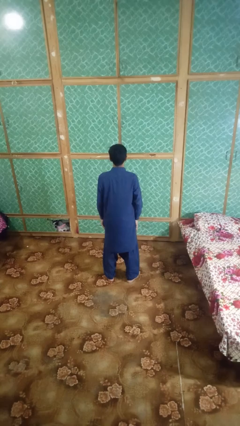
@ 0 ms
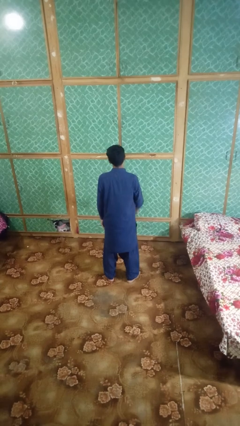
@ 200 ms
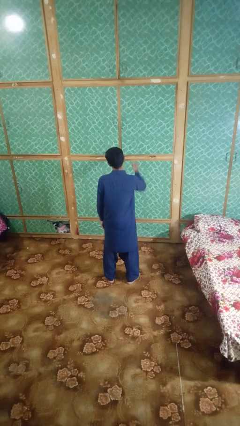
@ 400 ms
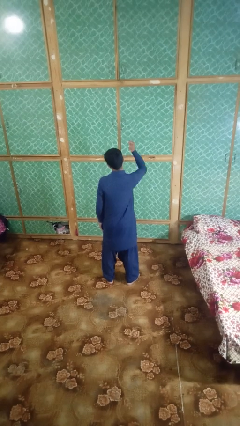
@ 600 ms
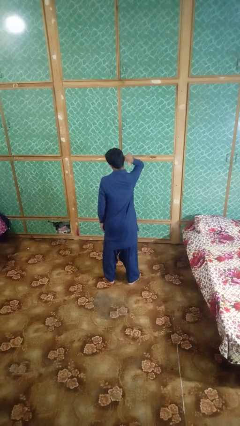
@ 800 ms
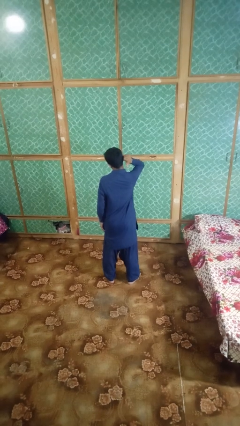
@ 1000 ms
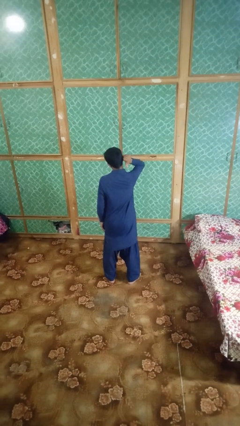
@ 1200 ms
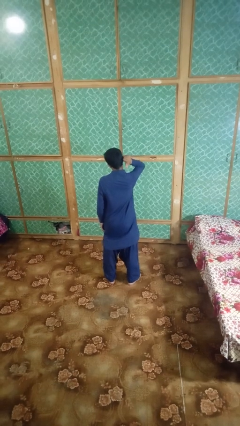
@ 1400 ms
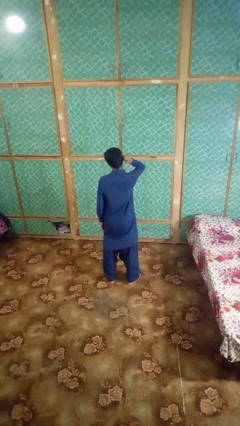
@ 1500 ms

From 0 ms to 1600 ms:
person gestures behind me

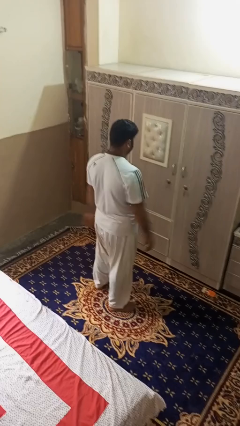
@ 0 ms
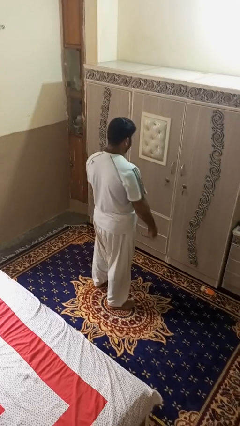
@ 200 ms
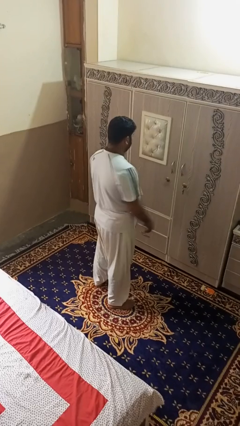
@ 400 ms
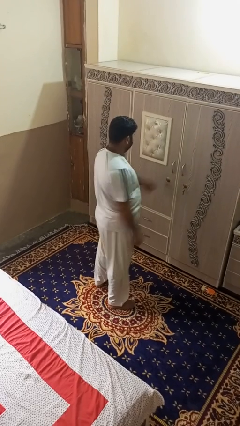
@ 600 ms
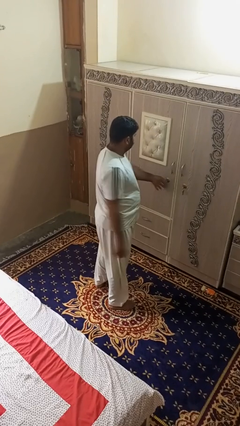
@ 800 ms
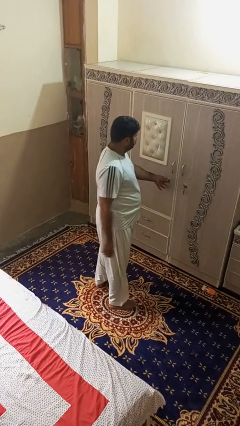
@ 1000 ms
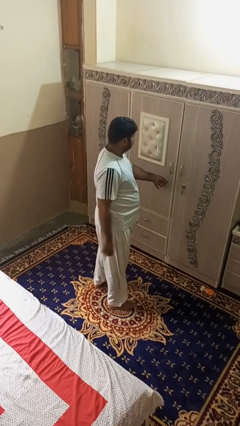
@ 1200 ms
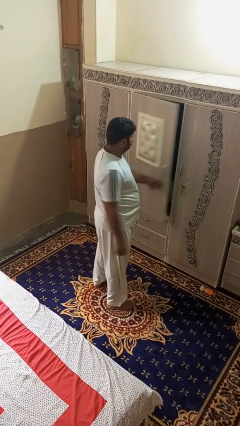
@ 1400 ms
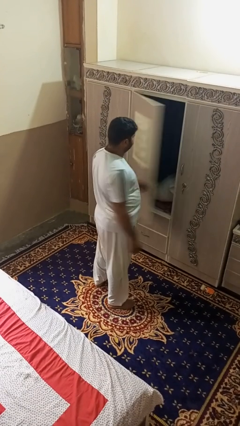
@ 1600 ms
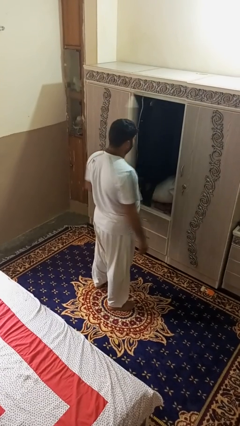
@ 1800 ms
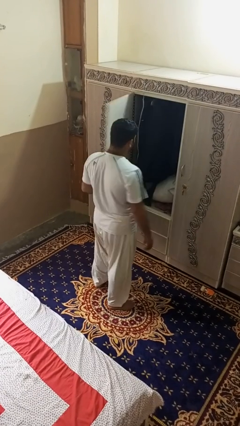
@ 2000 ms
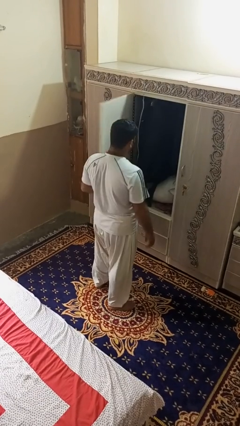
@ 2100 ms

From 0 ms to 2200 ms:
person opens dresser drawer

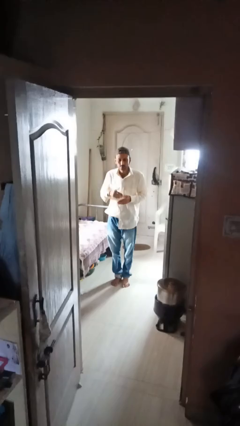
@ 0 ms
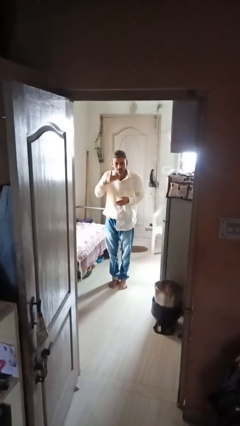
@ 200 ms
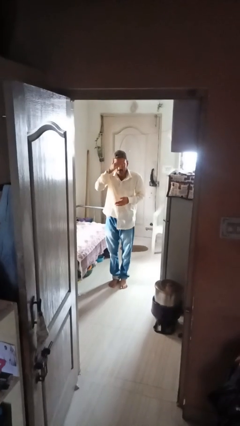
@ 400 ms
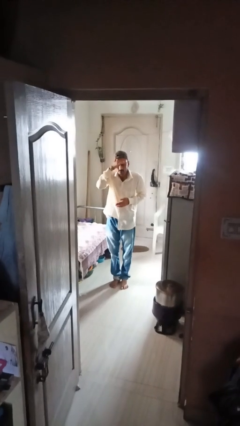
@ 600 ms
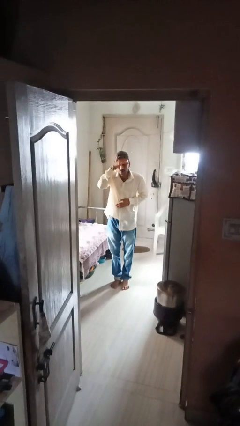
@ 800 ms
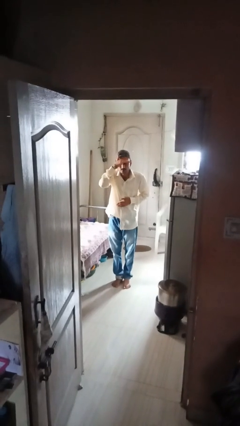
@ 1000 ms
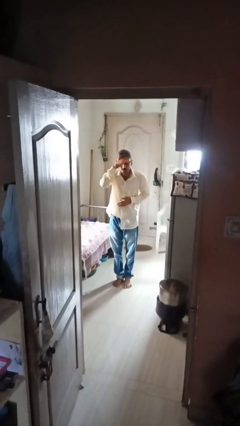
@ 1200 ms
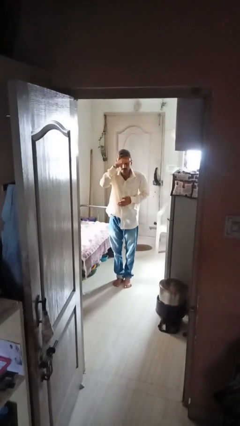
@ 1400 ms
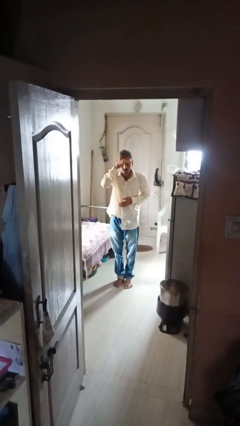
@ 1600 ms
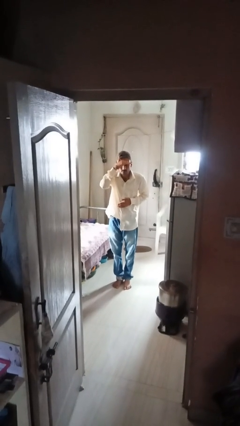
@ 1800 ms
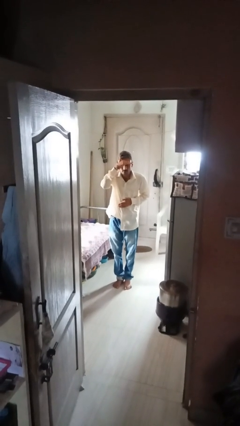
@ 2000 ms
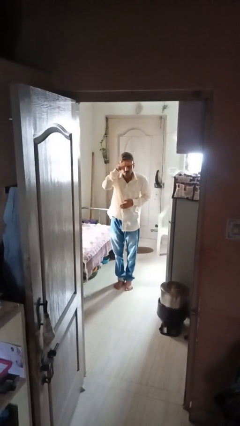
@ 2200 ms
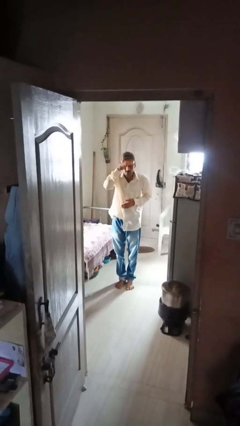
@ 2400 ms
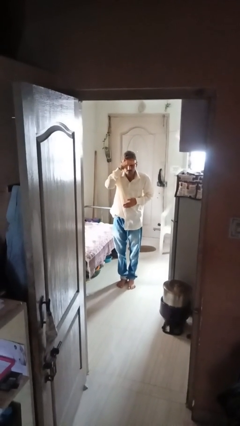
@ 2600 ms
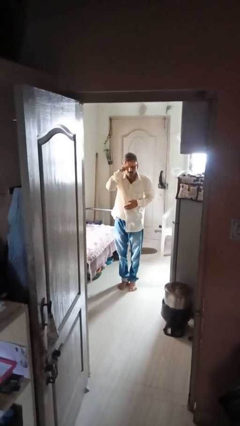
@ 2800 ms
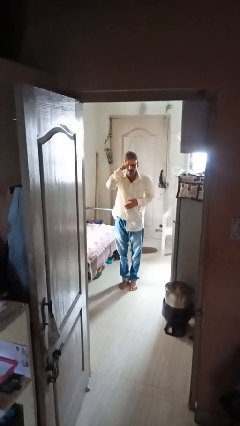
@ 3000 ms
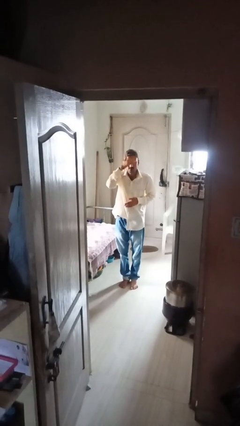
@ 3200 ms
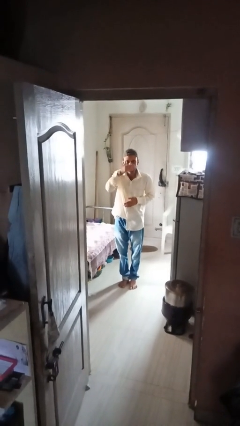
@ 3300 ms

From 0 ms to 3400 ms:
person shades eyes

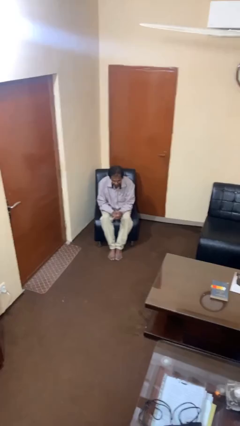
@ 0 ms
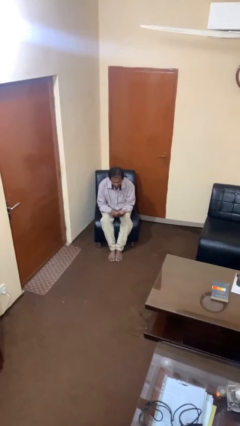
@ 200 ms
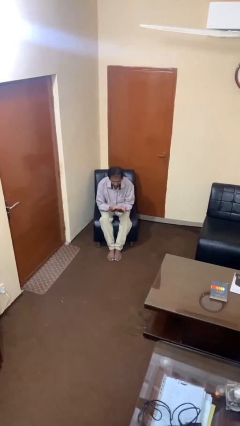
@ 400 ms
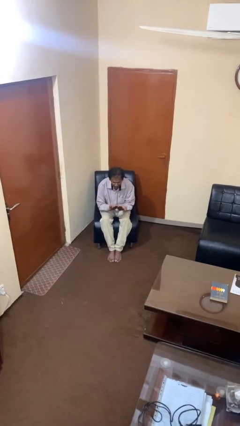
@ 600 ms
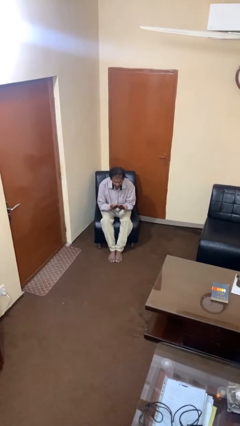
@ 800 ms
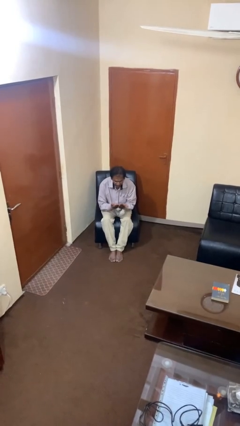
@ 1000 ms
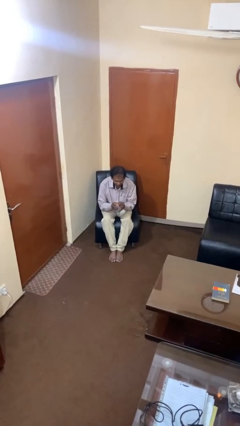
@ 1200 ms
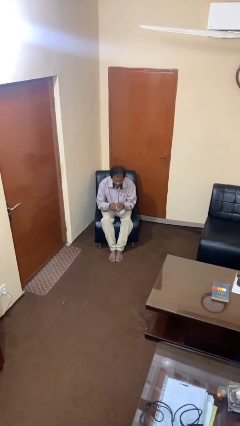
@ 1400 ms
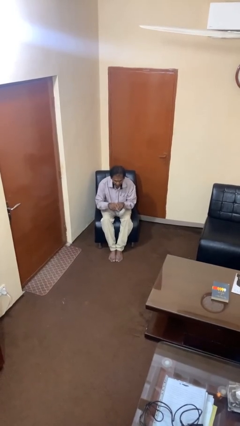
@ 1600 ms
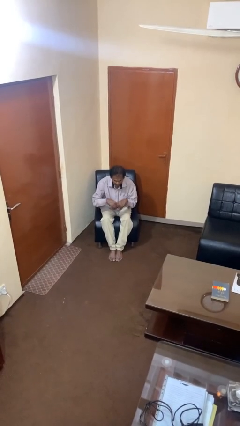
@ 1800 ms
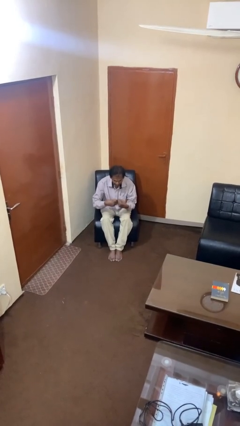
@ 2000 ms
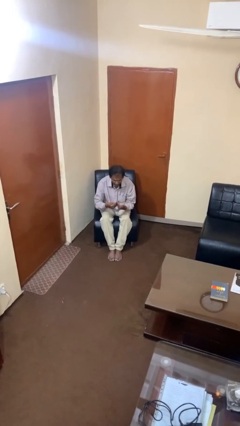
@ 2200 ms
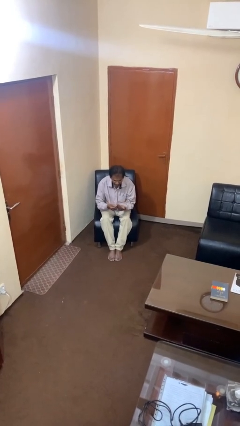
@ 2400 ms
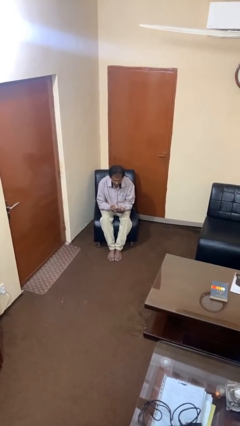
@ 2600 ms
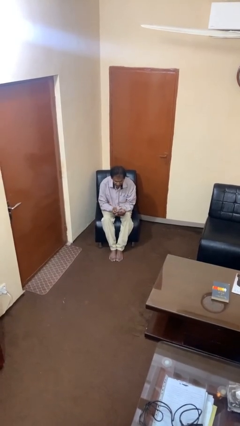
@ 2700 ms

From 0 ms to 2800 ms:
person looks at hands in lap

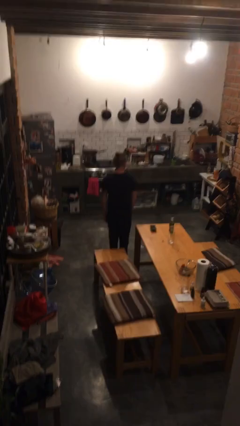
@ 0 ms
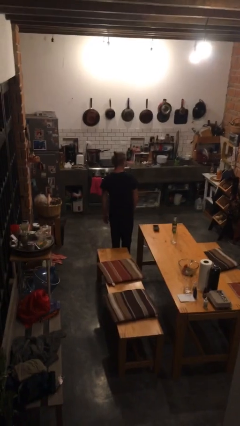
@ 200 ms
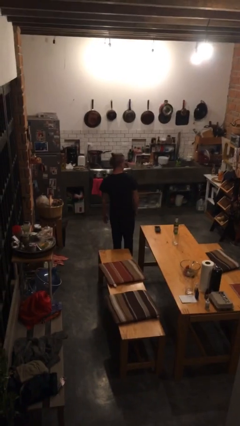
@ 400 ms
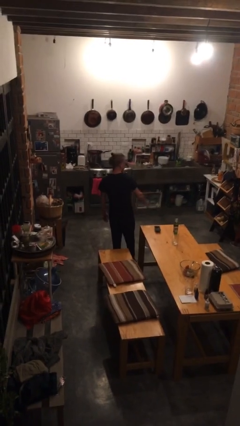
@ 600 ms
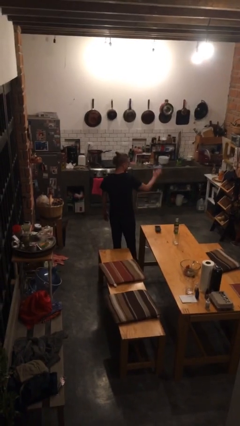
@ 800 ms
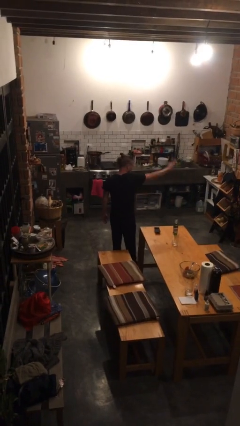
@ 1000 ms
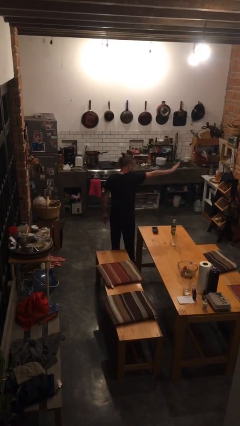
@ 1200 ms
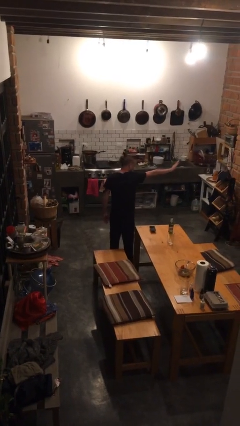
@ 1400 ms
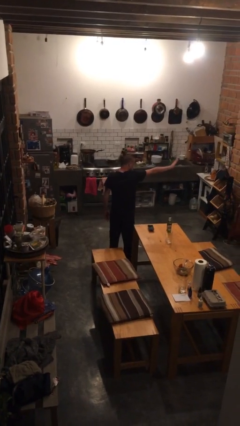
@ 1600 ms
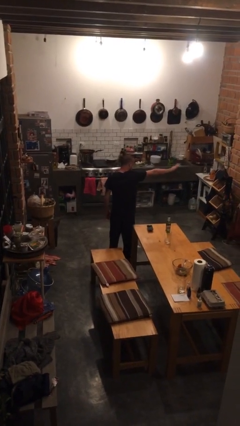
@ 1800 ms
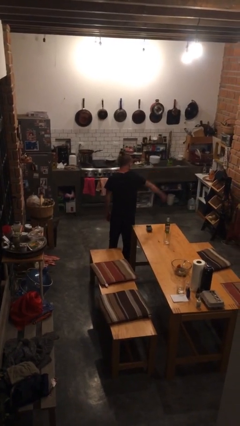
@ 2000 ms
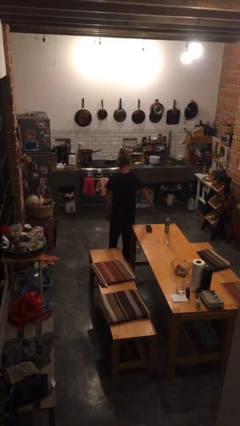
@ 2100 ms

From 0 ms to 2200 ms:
person gestures stop

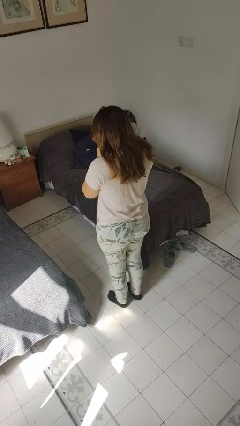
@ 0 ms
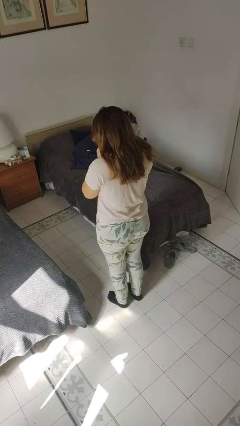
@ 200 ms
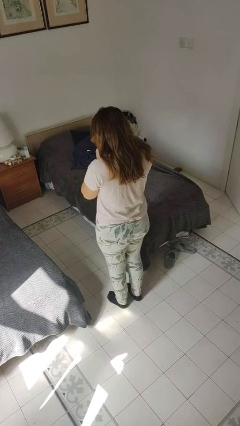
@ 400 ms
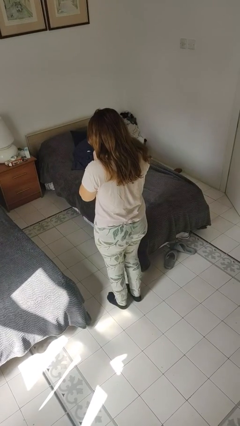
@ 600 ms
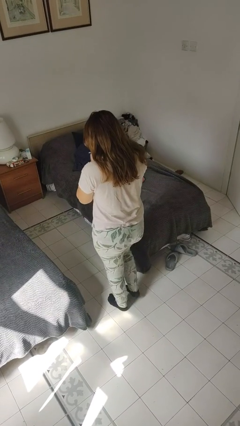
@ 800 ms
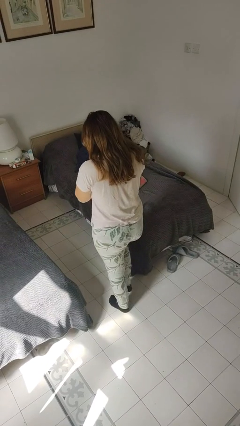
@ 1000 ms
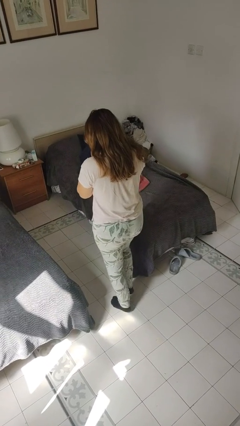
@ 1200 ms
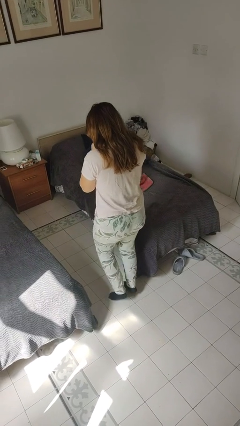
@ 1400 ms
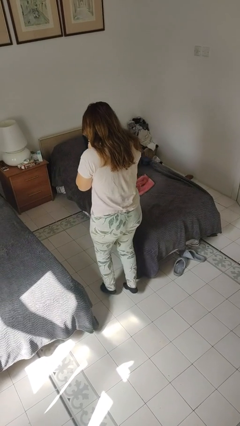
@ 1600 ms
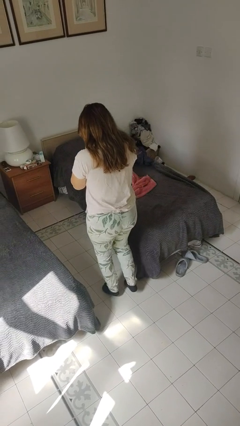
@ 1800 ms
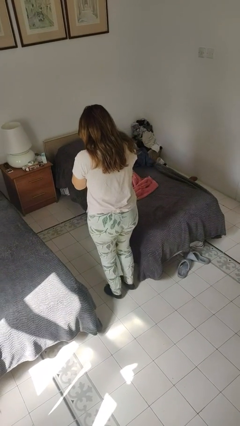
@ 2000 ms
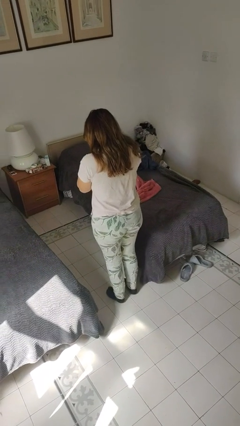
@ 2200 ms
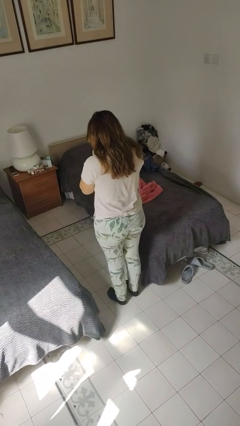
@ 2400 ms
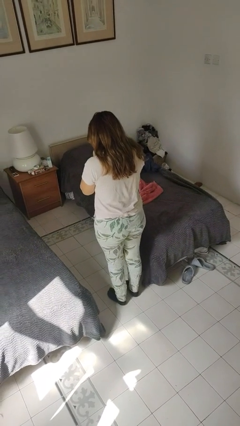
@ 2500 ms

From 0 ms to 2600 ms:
person walks tiptoe

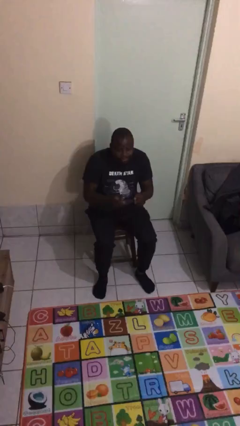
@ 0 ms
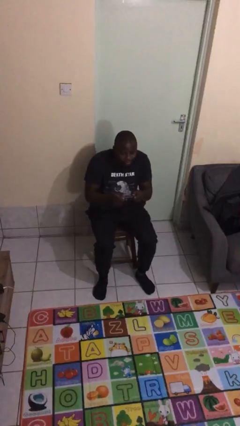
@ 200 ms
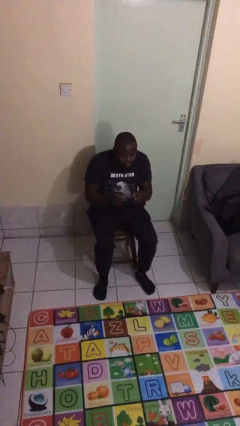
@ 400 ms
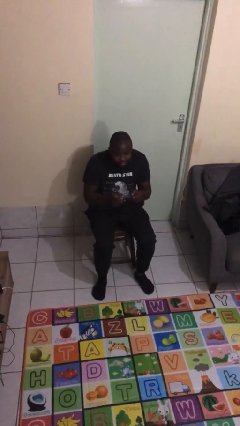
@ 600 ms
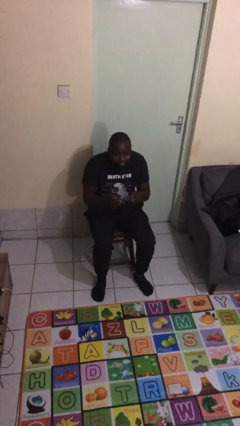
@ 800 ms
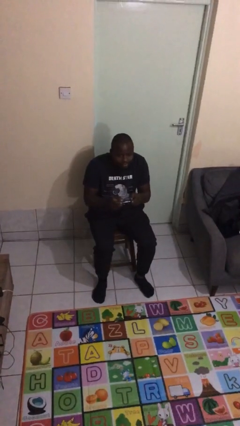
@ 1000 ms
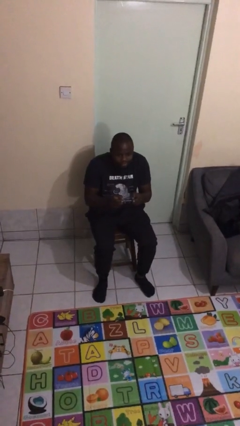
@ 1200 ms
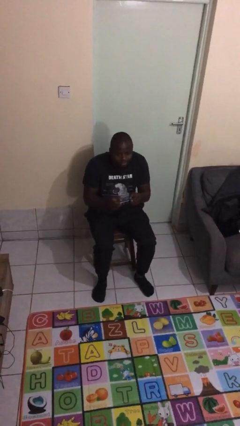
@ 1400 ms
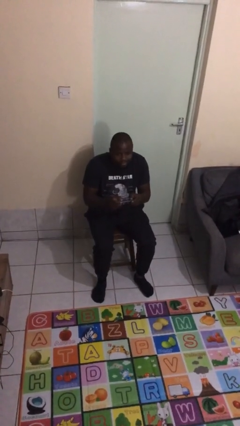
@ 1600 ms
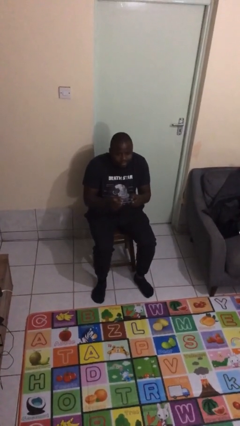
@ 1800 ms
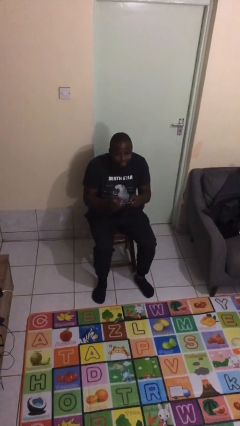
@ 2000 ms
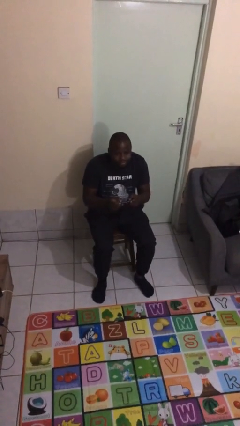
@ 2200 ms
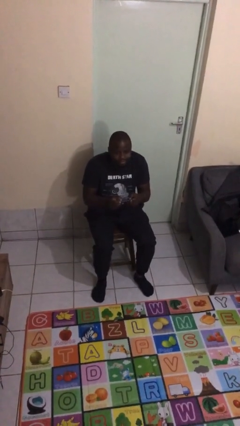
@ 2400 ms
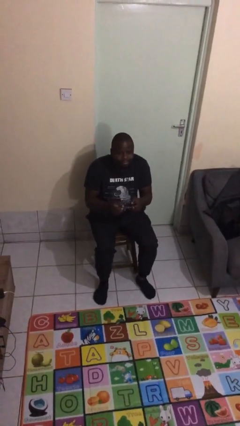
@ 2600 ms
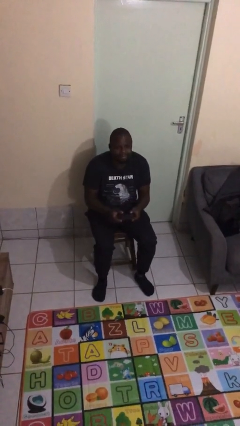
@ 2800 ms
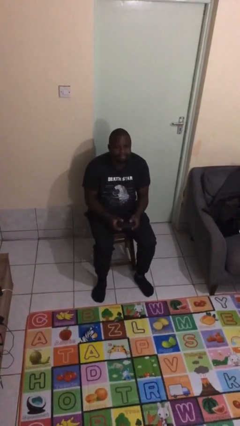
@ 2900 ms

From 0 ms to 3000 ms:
person interacts with handheld game
